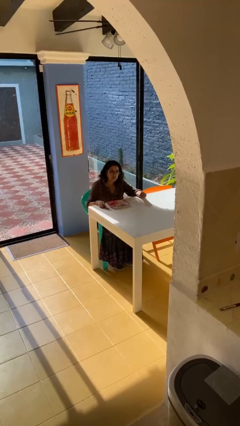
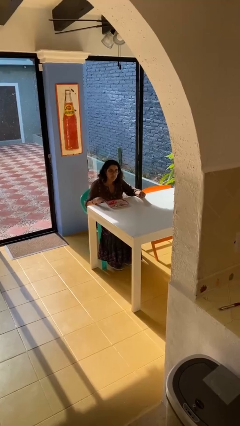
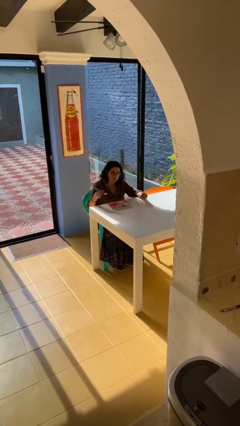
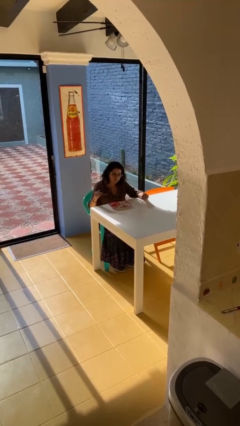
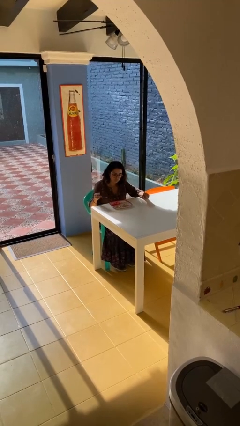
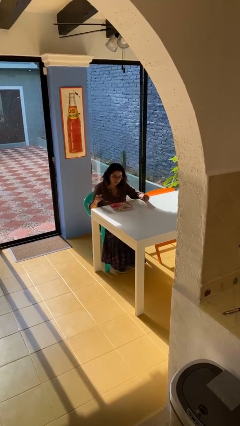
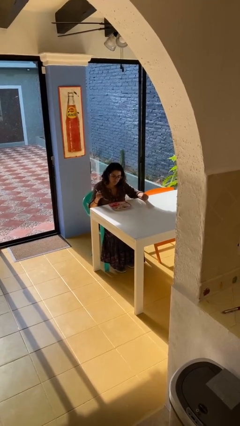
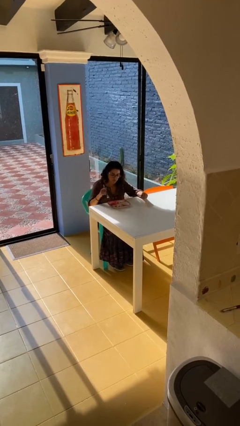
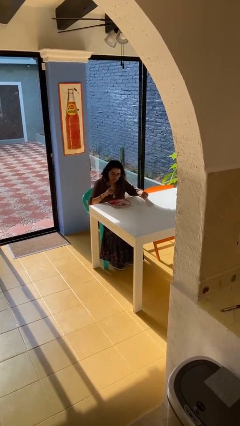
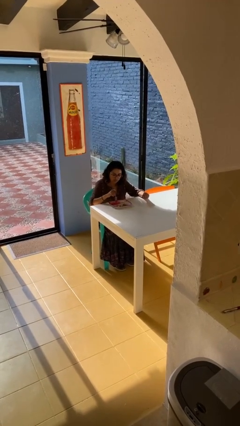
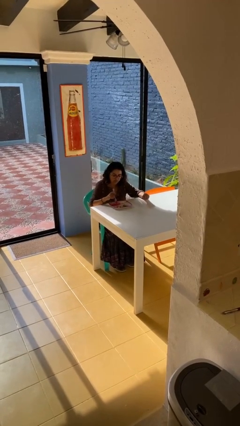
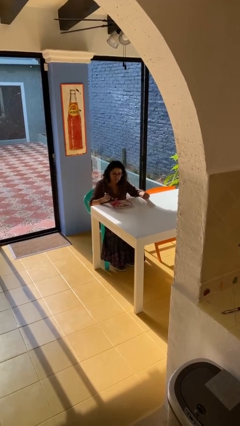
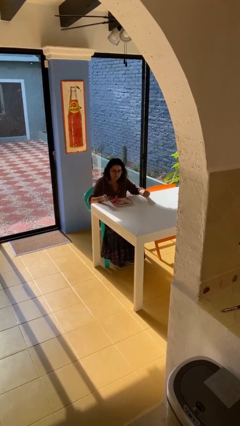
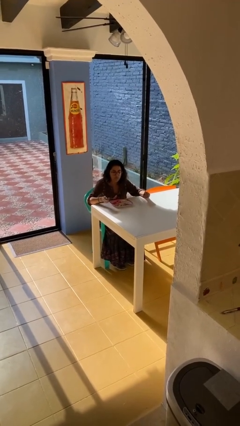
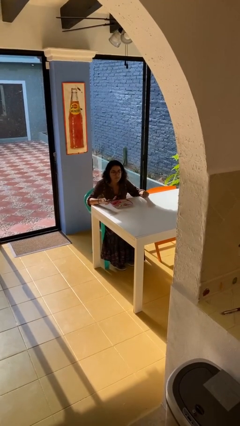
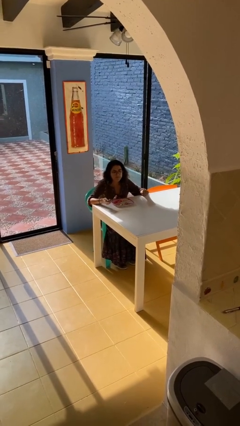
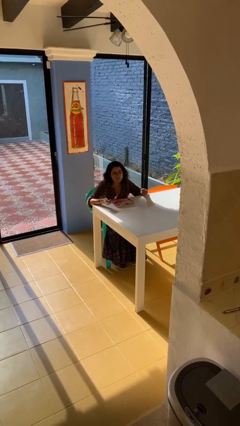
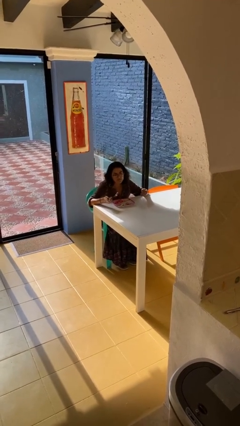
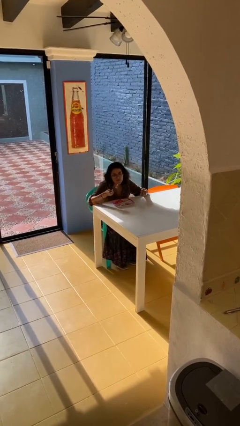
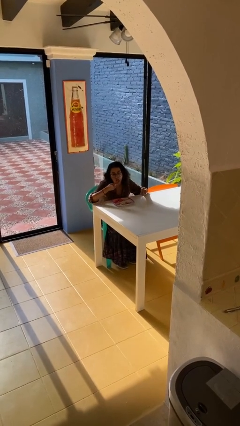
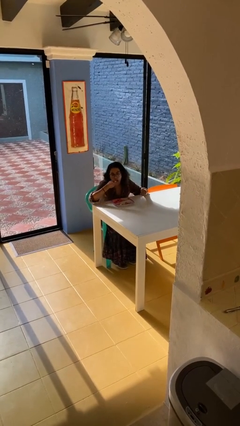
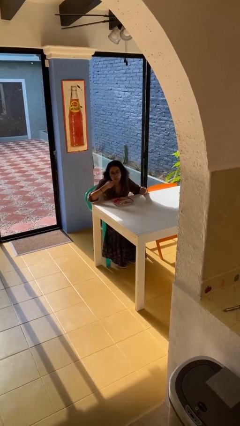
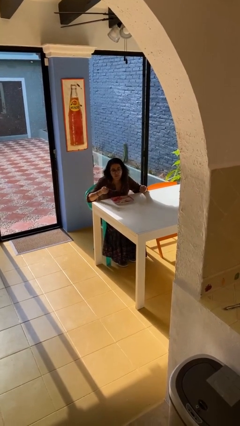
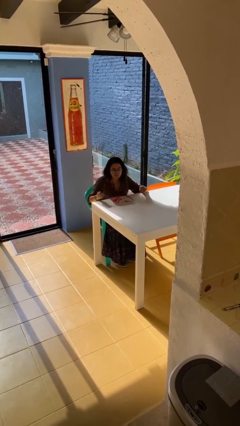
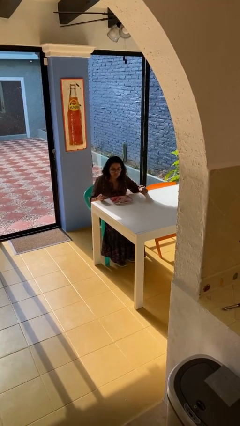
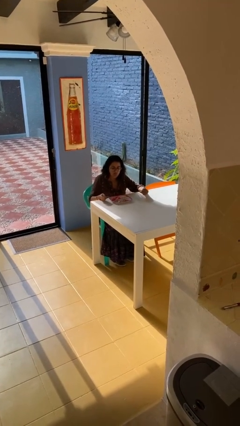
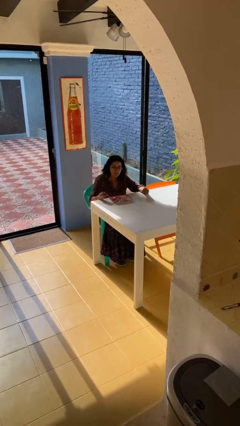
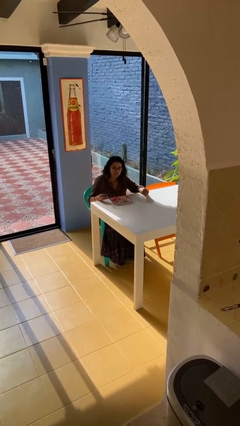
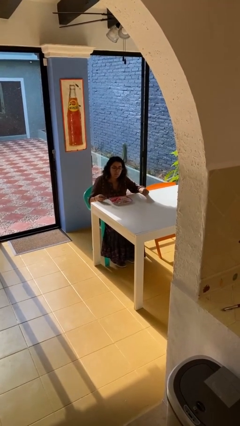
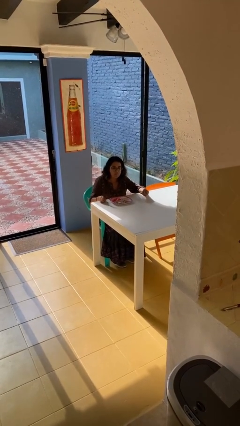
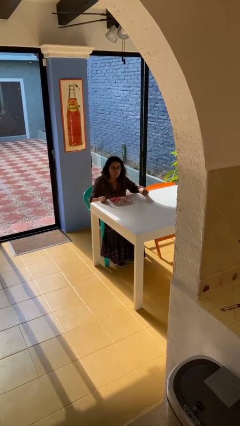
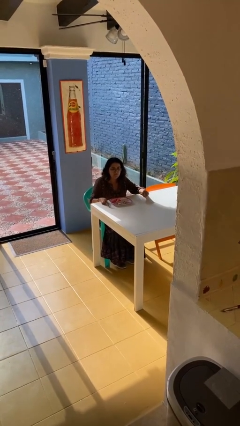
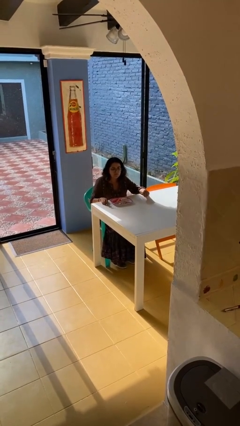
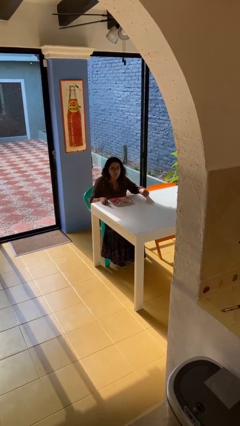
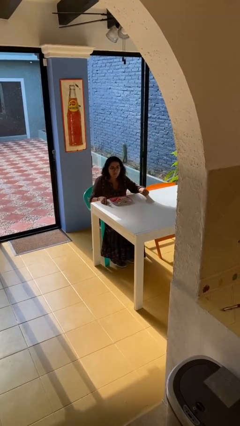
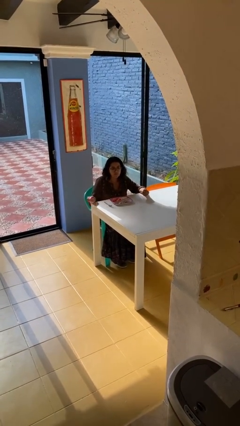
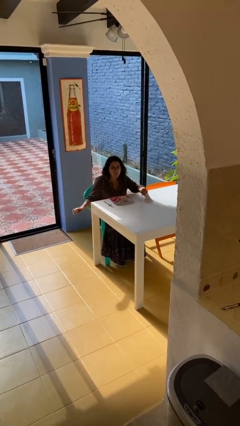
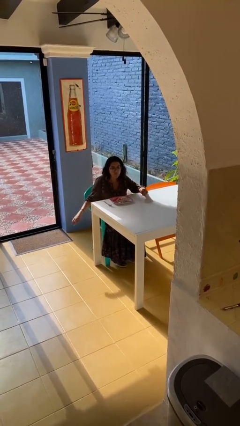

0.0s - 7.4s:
person eats with utensil

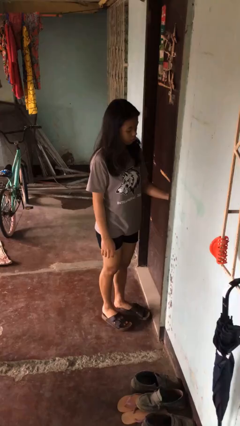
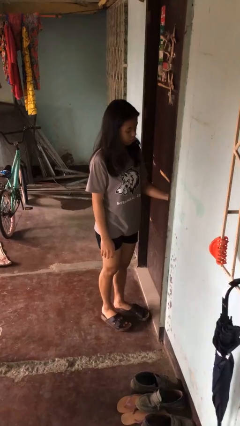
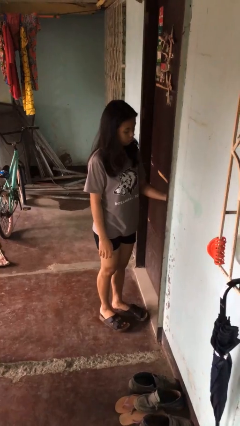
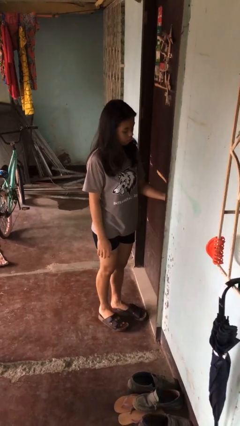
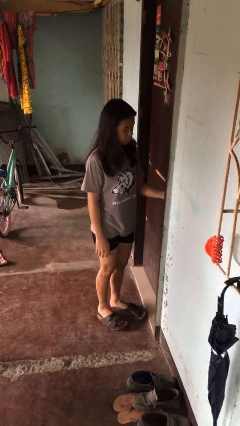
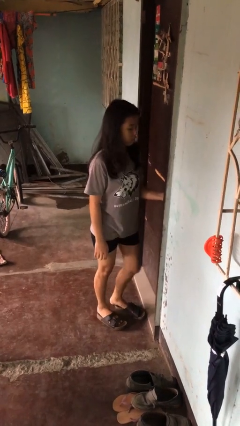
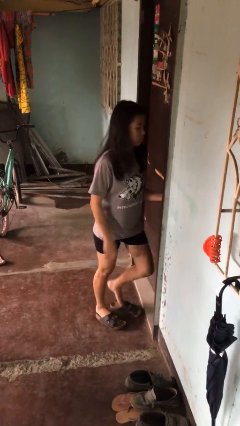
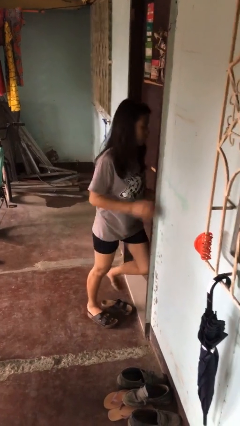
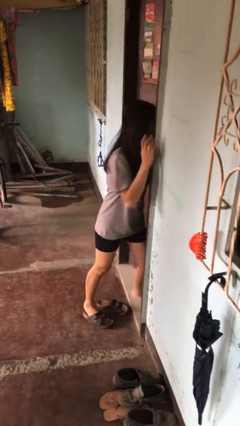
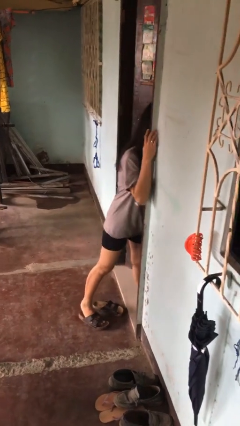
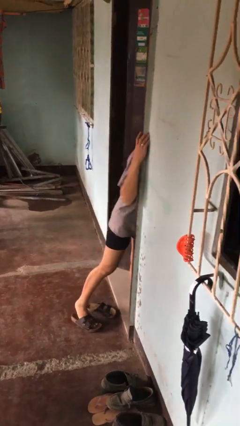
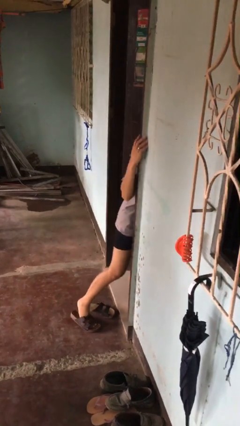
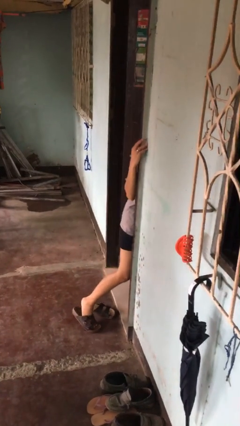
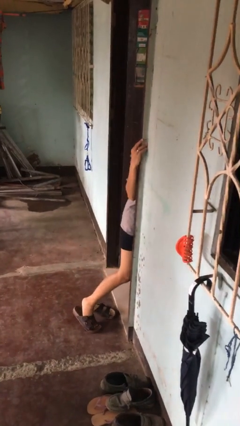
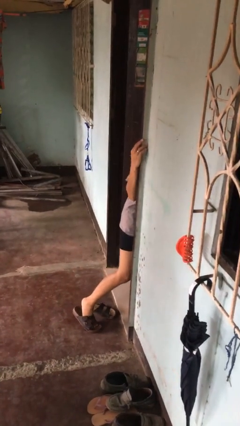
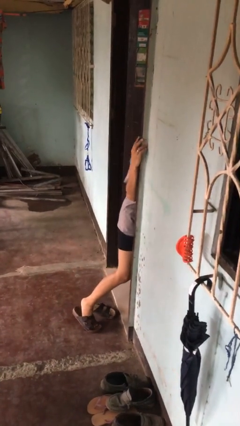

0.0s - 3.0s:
person opens facility door

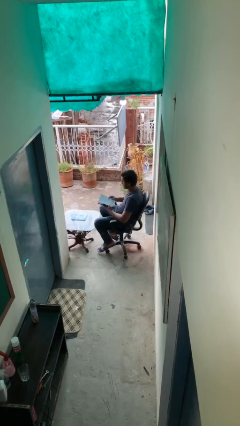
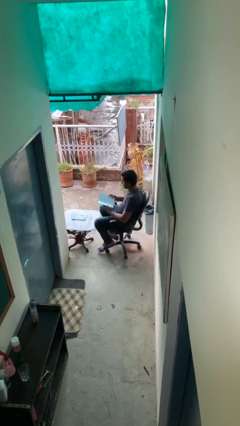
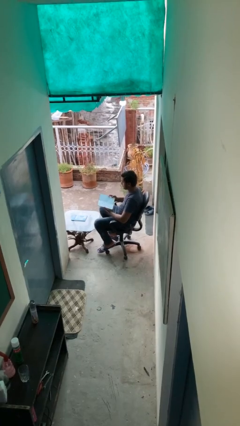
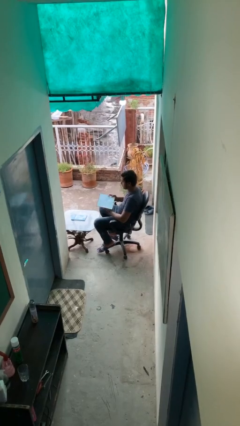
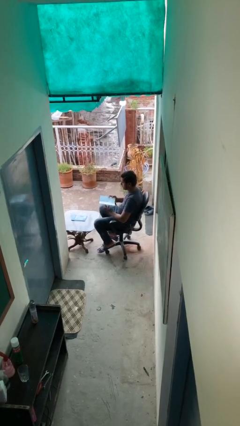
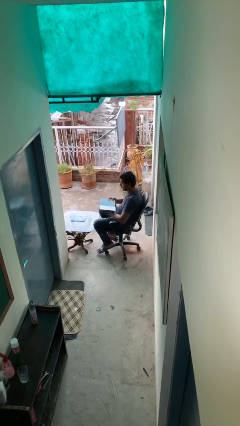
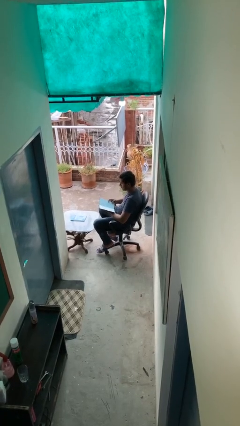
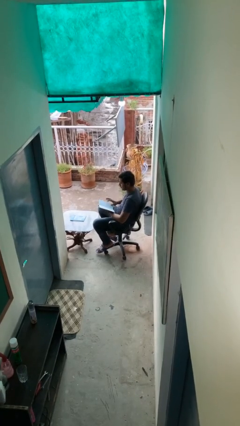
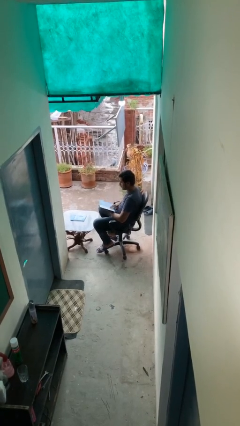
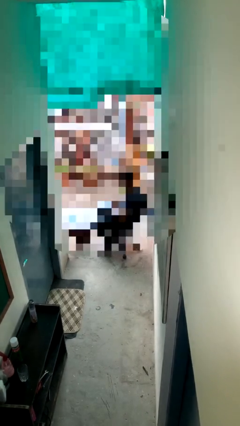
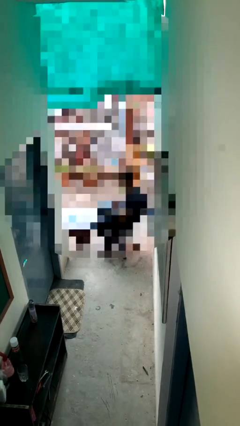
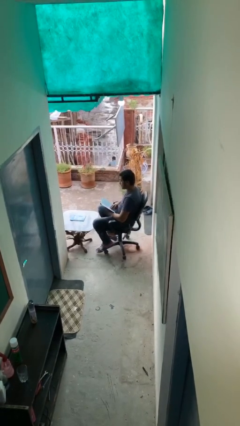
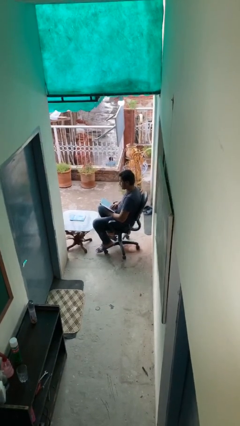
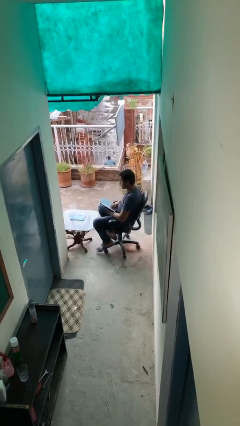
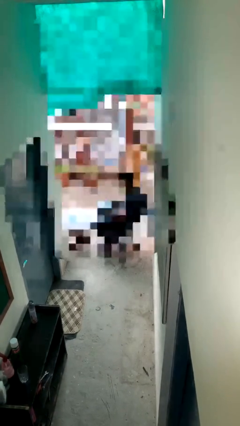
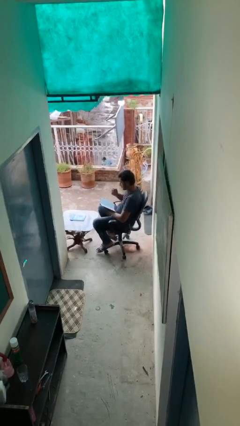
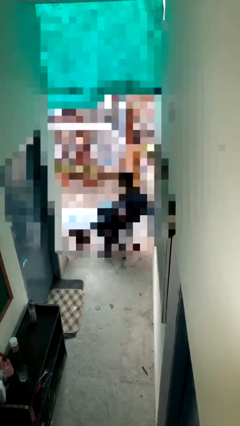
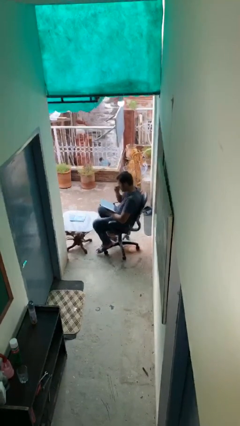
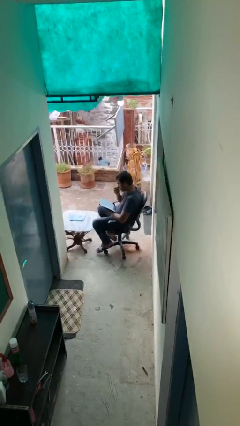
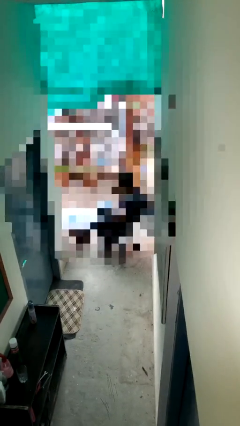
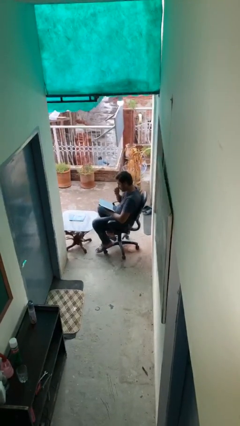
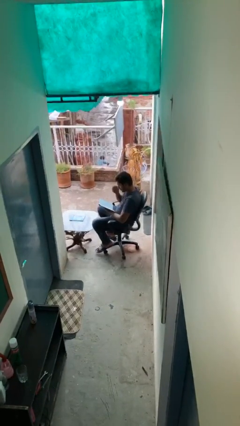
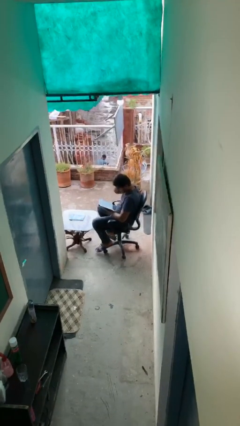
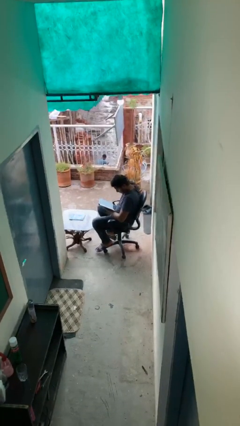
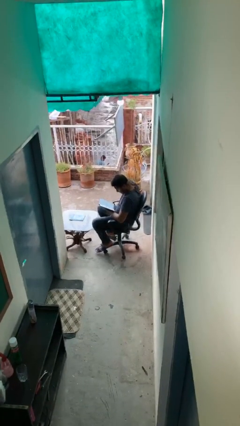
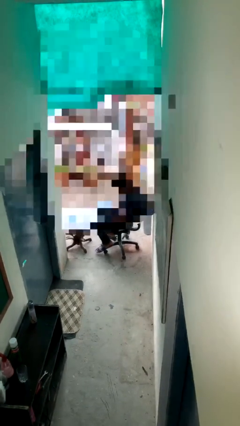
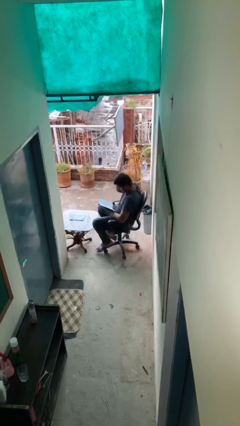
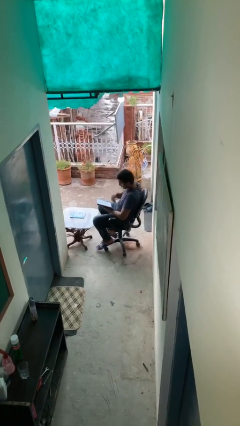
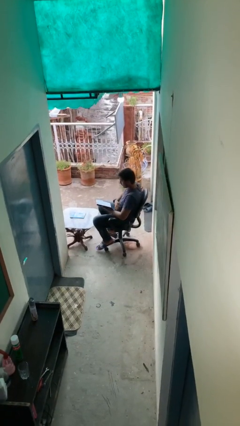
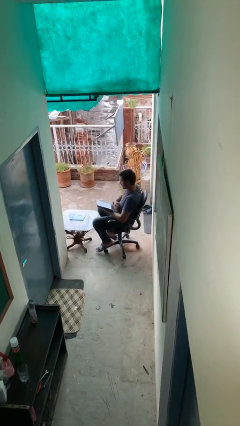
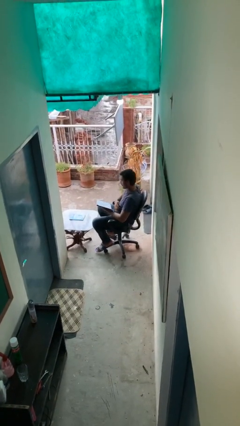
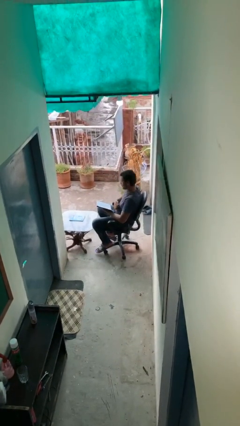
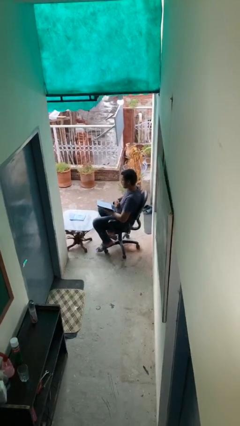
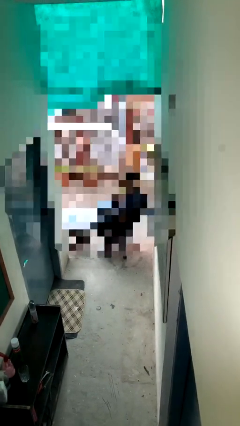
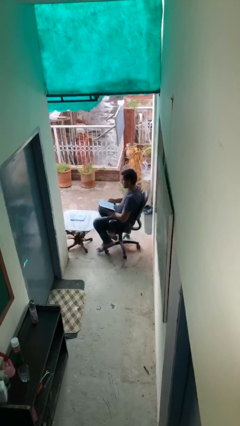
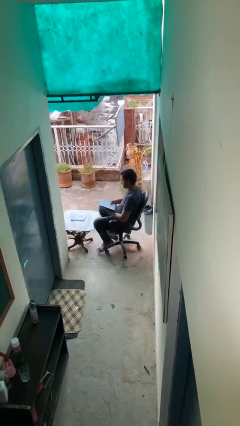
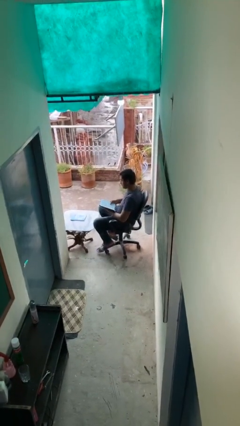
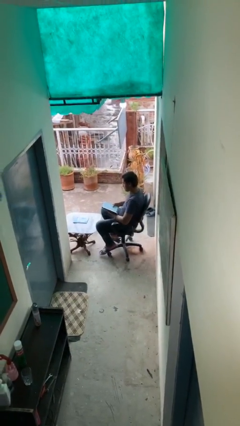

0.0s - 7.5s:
person reads document
